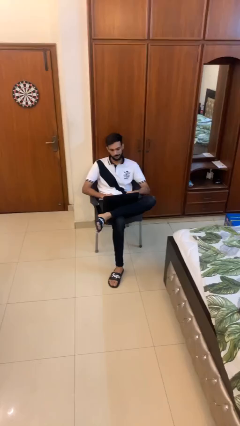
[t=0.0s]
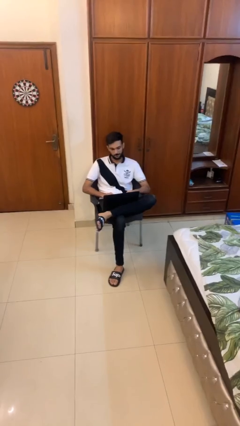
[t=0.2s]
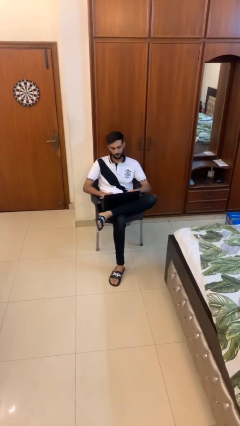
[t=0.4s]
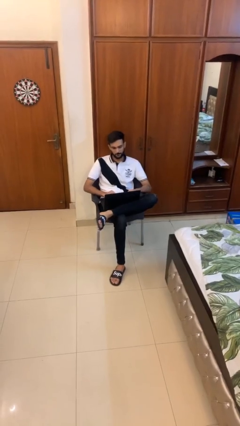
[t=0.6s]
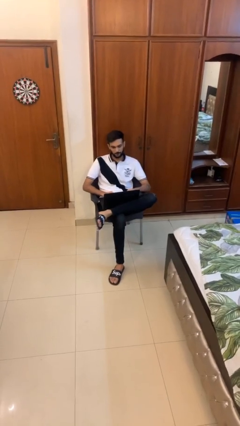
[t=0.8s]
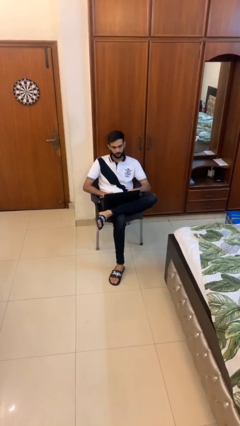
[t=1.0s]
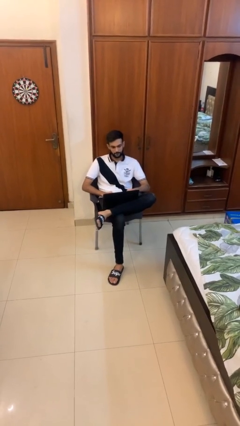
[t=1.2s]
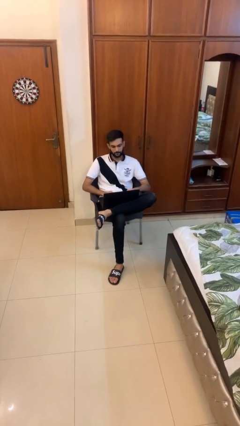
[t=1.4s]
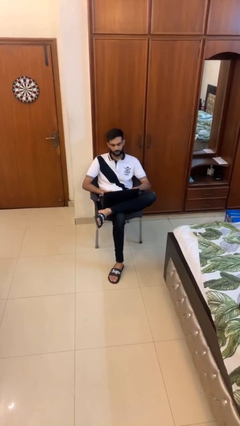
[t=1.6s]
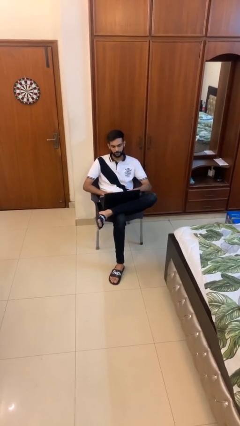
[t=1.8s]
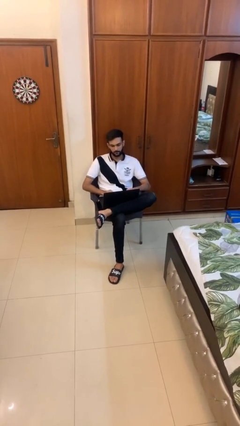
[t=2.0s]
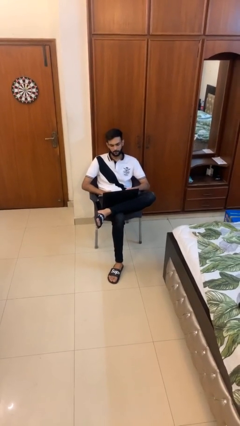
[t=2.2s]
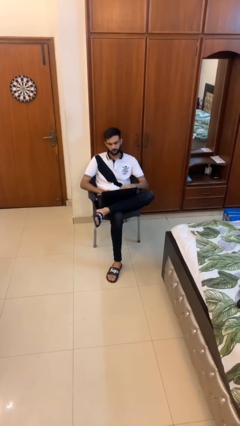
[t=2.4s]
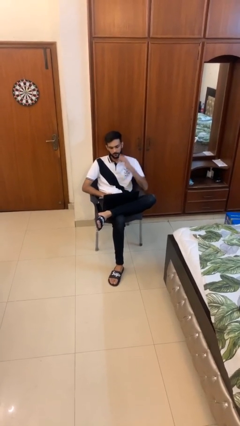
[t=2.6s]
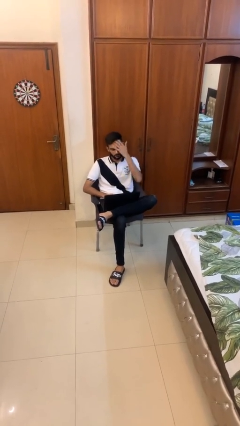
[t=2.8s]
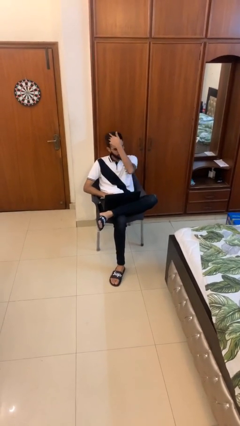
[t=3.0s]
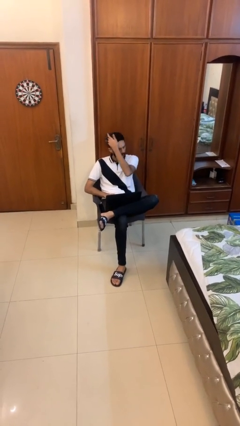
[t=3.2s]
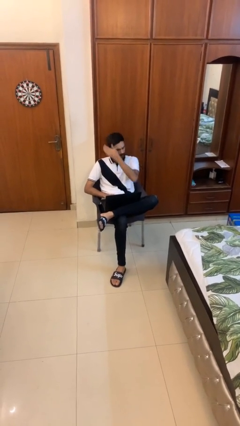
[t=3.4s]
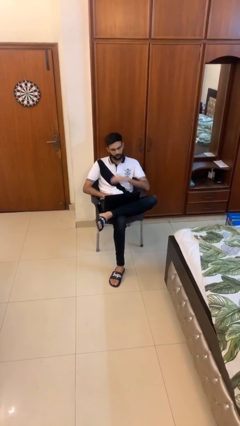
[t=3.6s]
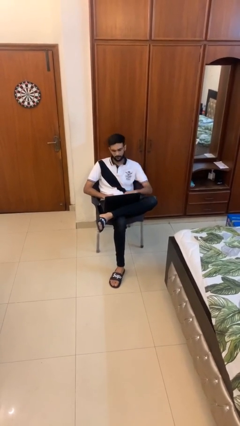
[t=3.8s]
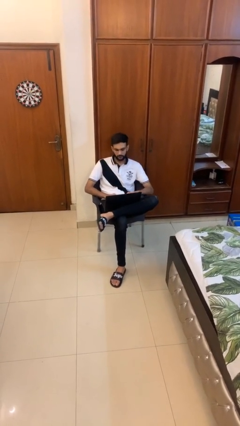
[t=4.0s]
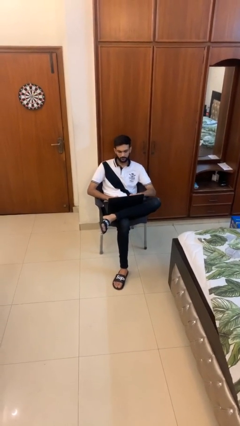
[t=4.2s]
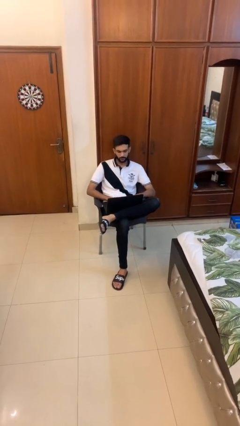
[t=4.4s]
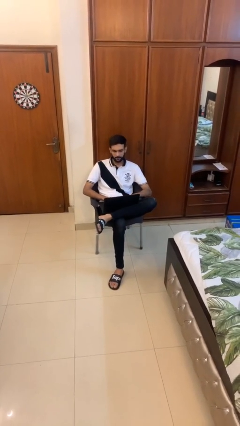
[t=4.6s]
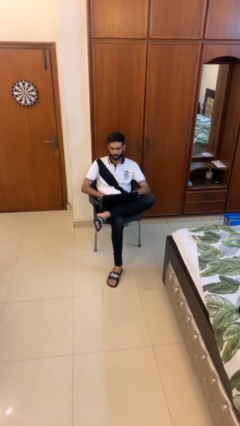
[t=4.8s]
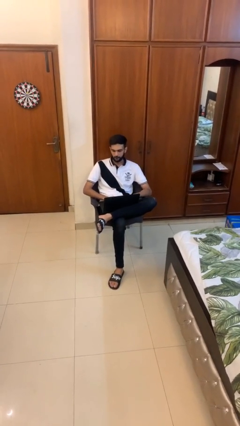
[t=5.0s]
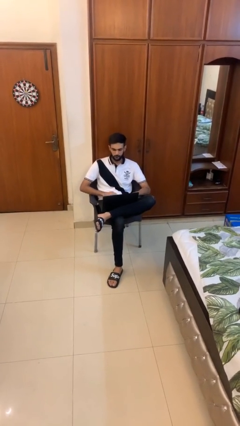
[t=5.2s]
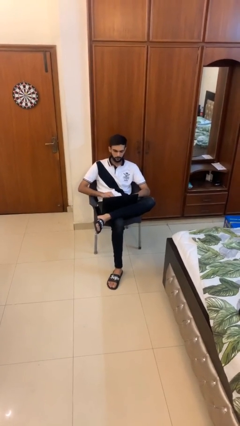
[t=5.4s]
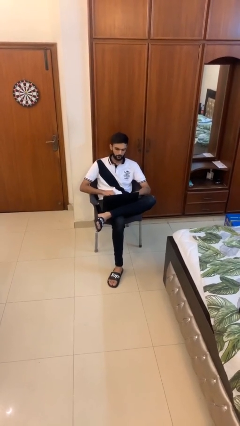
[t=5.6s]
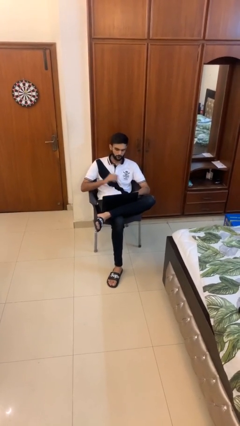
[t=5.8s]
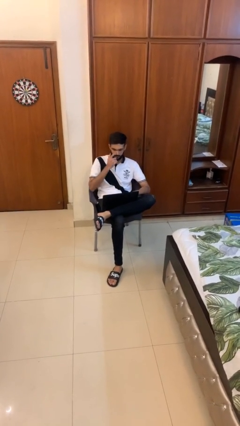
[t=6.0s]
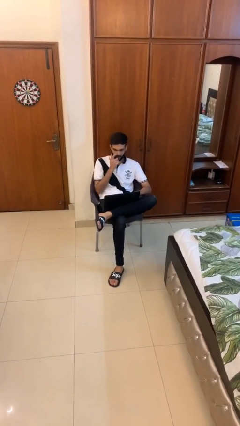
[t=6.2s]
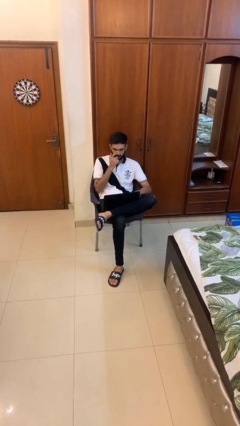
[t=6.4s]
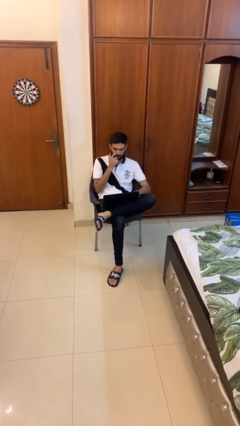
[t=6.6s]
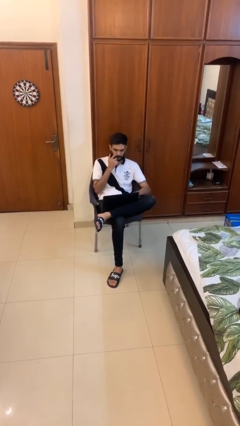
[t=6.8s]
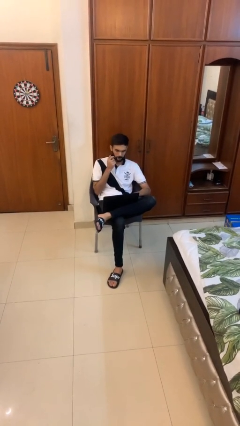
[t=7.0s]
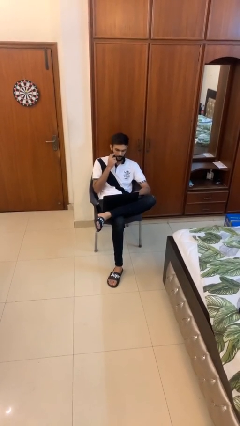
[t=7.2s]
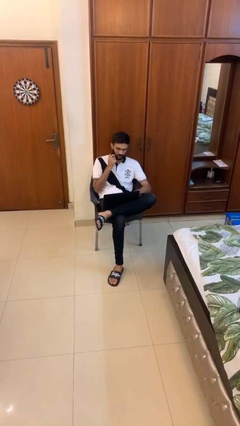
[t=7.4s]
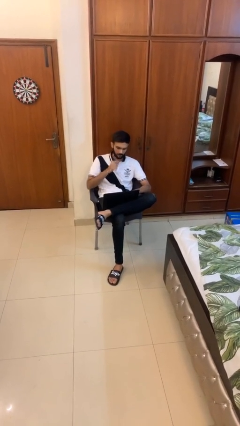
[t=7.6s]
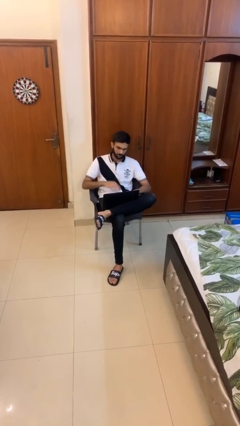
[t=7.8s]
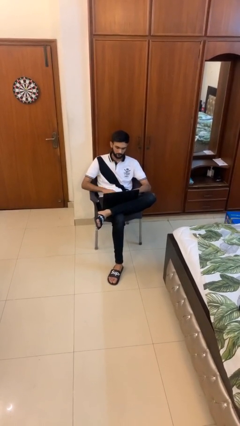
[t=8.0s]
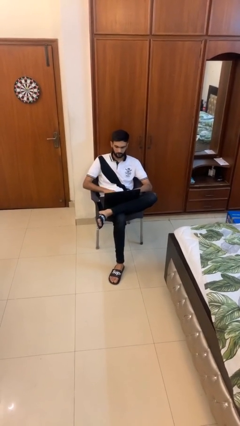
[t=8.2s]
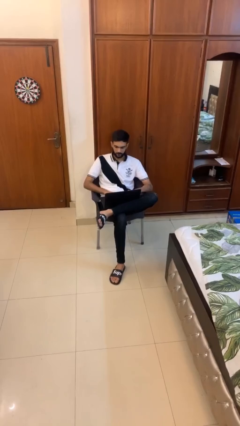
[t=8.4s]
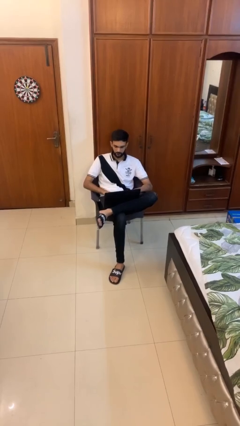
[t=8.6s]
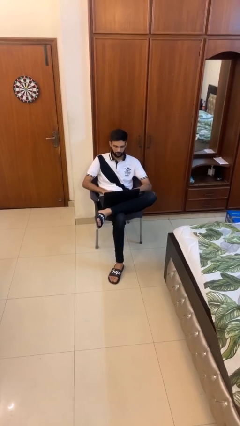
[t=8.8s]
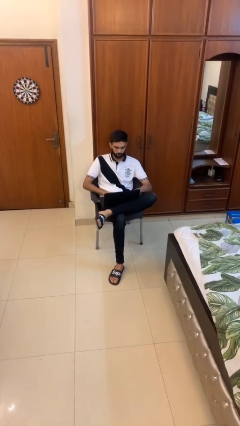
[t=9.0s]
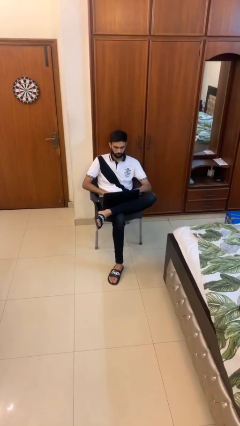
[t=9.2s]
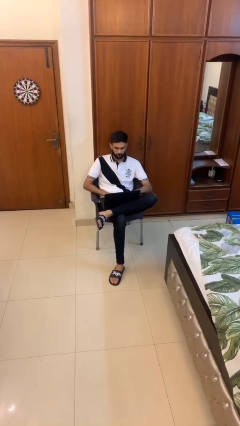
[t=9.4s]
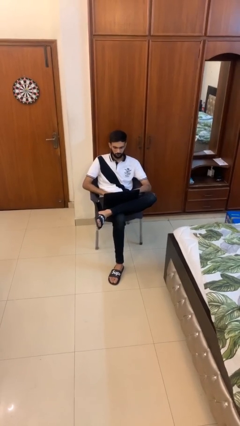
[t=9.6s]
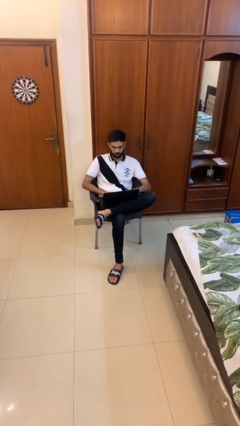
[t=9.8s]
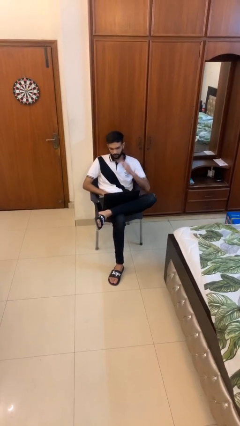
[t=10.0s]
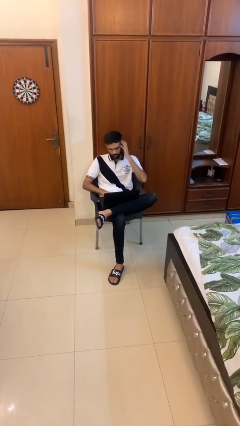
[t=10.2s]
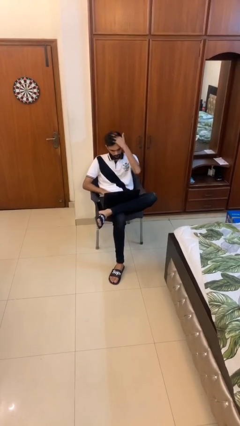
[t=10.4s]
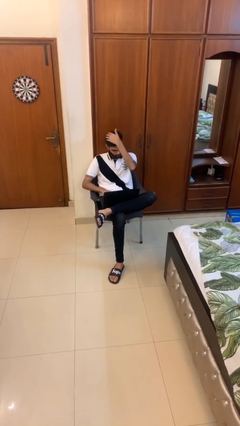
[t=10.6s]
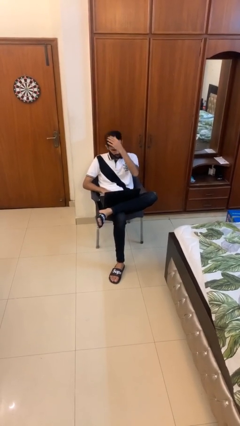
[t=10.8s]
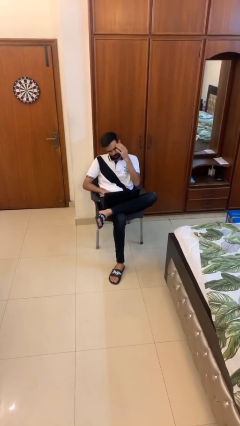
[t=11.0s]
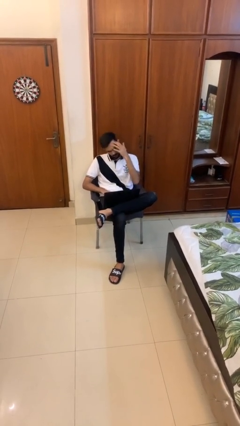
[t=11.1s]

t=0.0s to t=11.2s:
person interacts with laptop

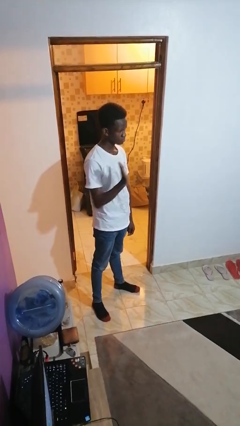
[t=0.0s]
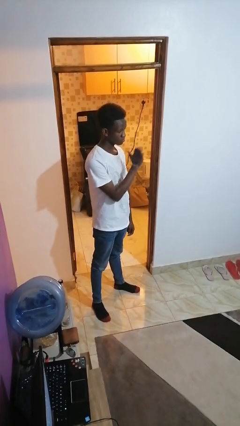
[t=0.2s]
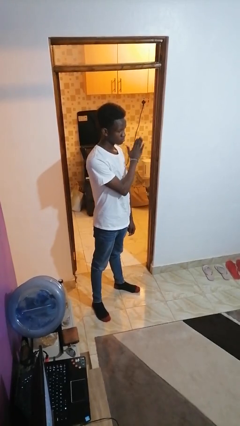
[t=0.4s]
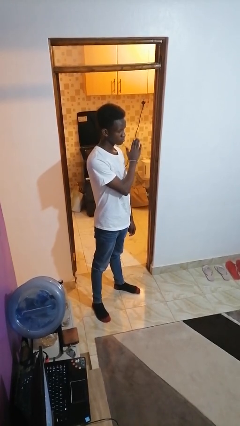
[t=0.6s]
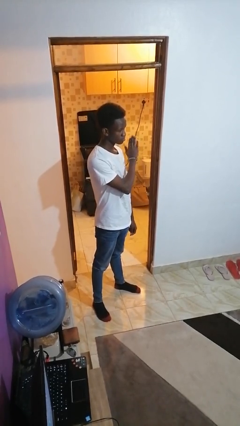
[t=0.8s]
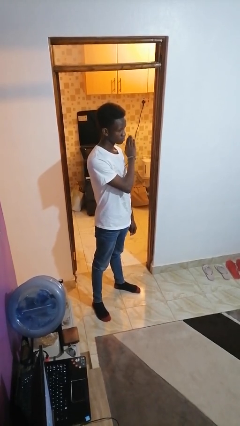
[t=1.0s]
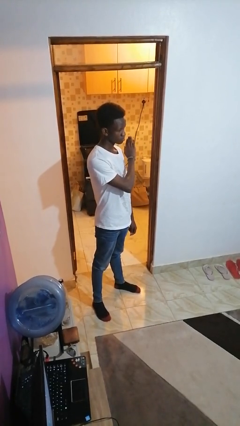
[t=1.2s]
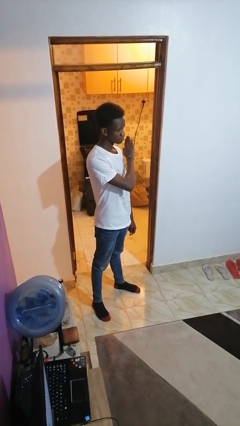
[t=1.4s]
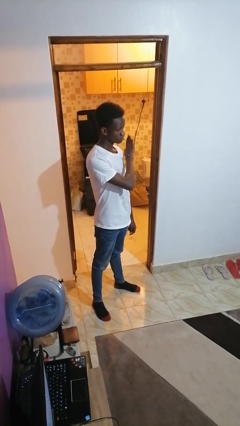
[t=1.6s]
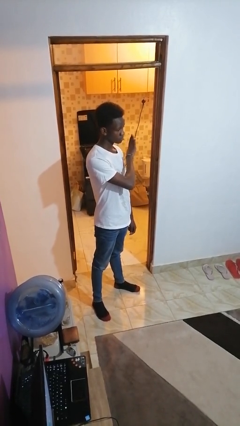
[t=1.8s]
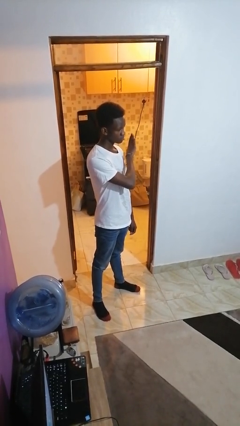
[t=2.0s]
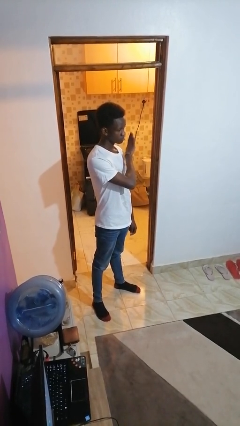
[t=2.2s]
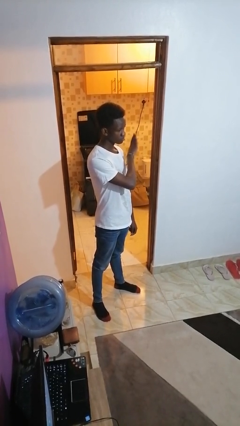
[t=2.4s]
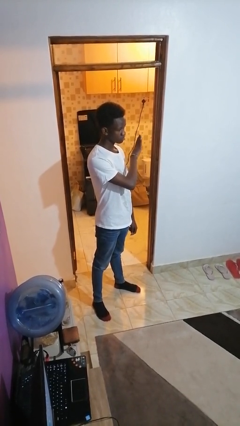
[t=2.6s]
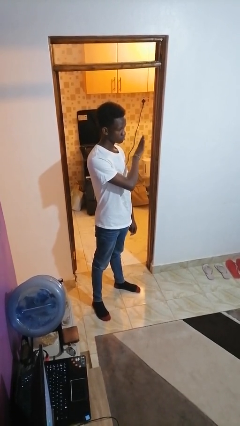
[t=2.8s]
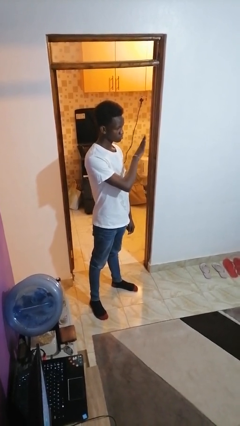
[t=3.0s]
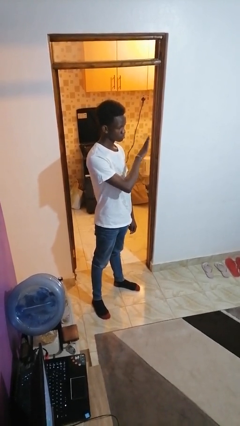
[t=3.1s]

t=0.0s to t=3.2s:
person gestures swipe left

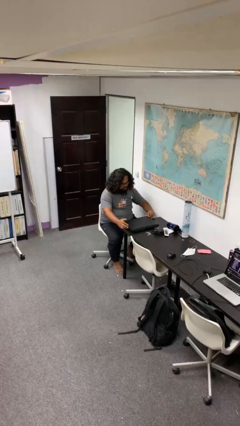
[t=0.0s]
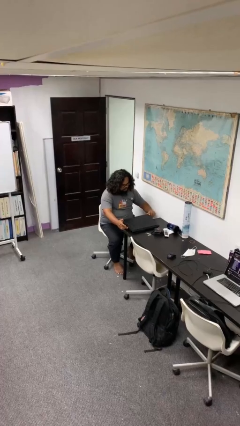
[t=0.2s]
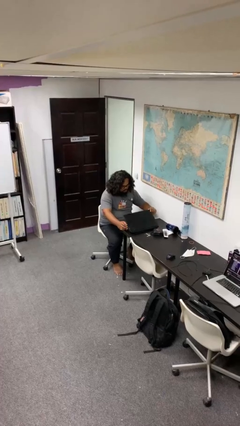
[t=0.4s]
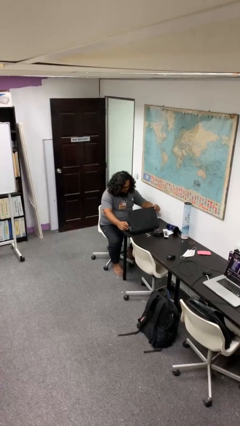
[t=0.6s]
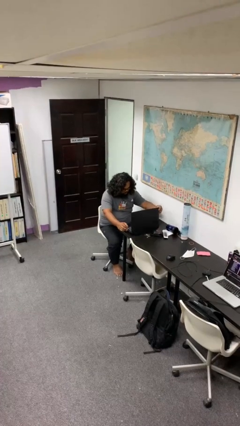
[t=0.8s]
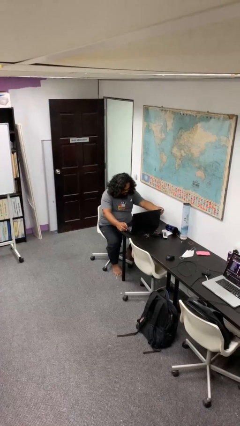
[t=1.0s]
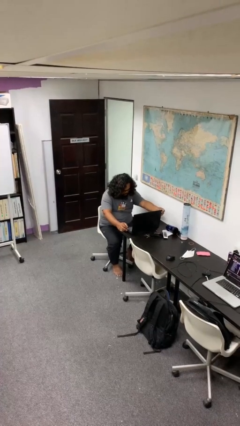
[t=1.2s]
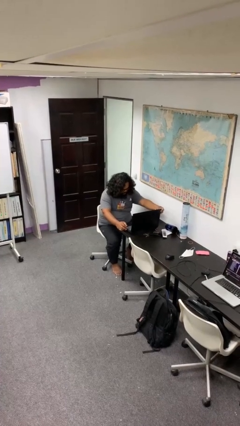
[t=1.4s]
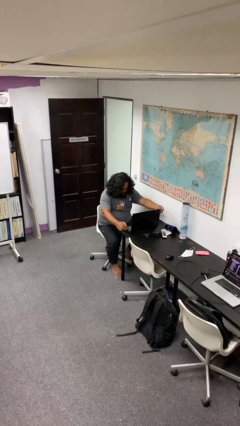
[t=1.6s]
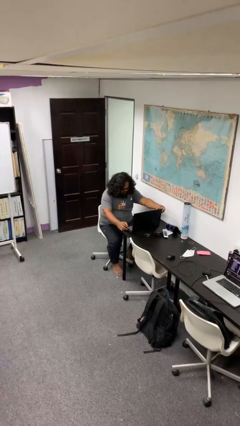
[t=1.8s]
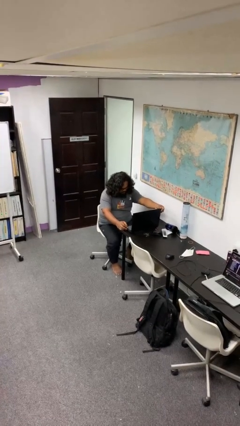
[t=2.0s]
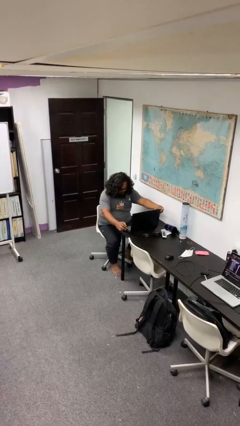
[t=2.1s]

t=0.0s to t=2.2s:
person opens laptop

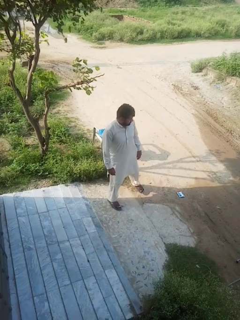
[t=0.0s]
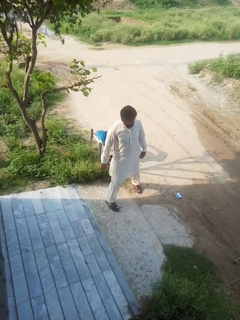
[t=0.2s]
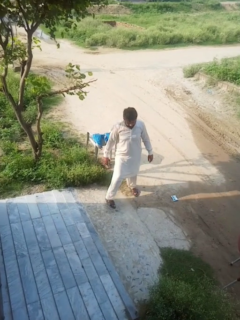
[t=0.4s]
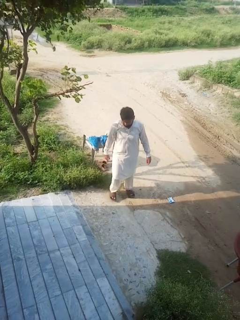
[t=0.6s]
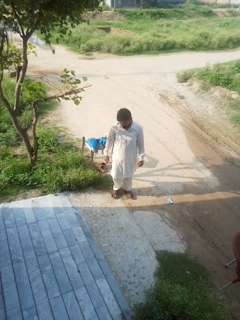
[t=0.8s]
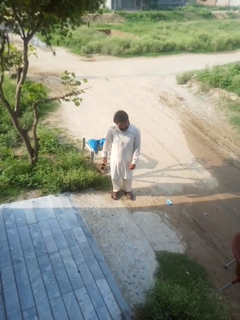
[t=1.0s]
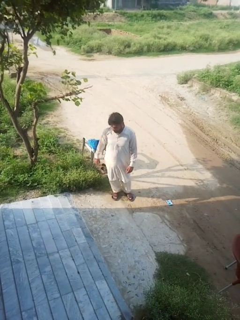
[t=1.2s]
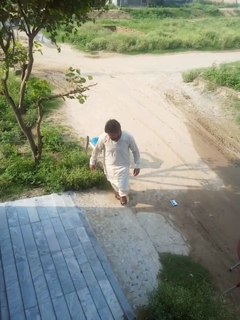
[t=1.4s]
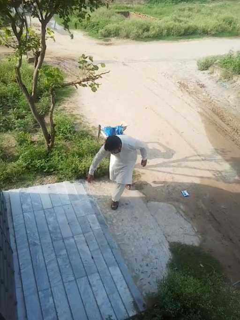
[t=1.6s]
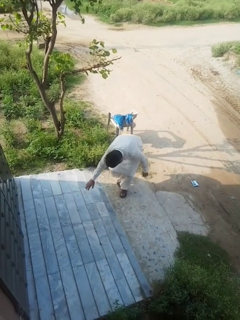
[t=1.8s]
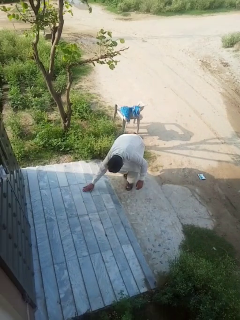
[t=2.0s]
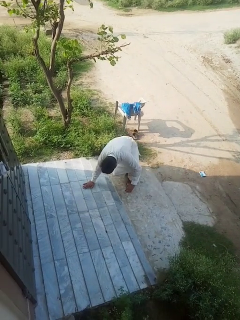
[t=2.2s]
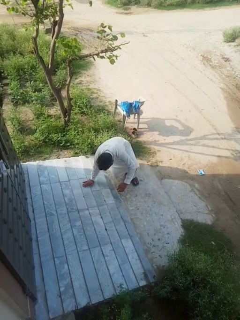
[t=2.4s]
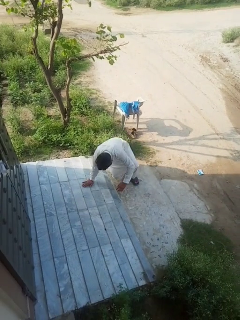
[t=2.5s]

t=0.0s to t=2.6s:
person trips on object on floor
